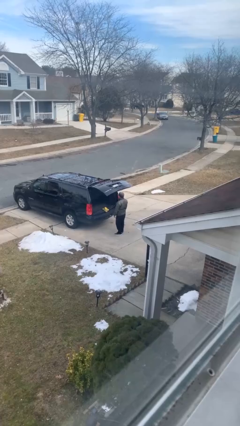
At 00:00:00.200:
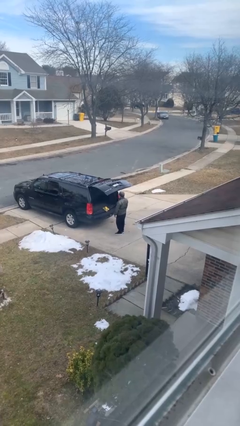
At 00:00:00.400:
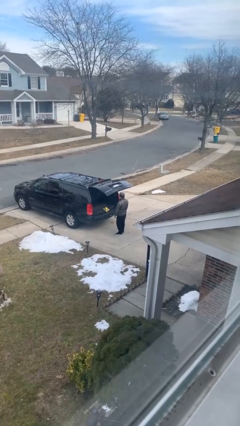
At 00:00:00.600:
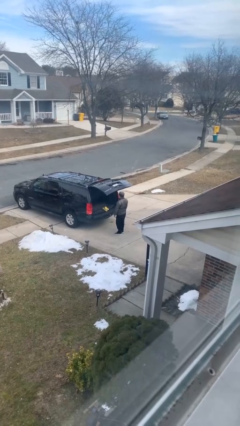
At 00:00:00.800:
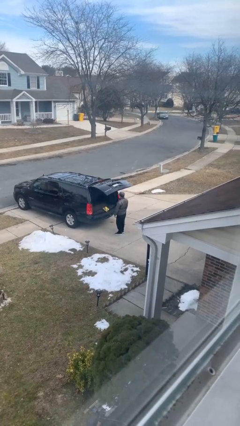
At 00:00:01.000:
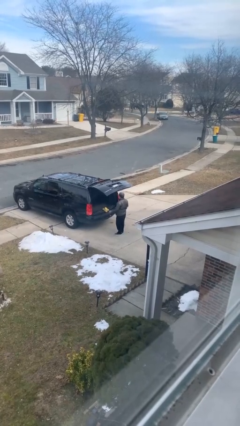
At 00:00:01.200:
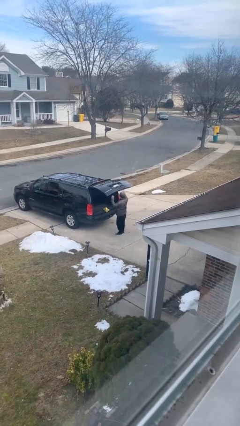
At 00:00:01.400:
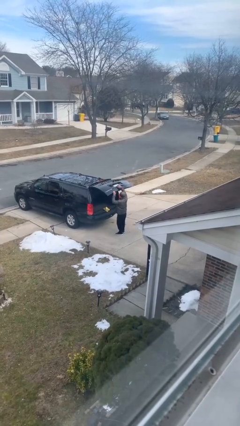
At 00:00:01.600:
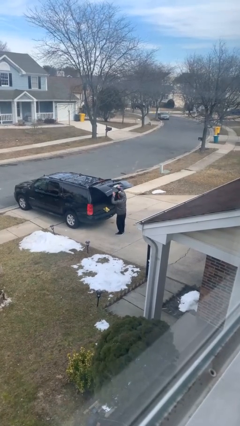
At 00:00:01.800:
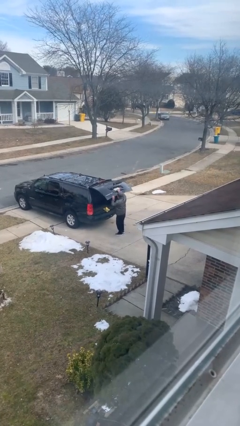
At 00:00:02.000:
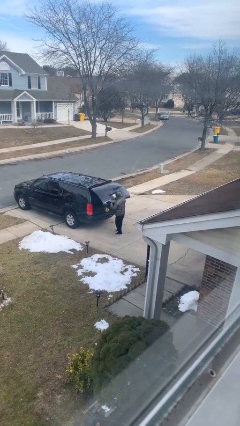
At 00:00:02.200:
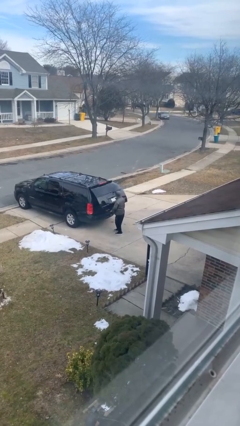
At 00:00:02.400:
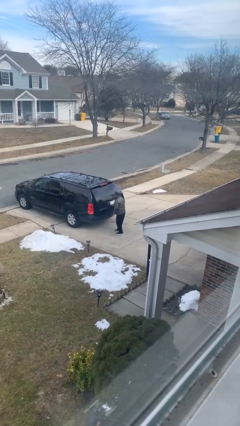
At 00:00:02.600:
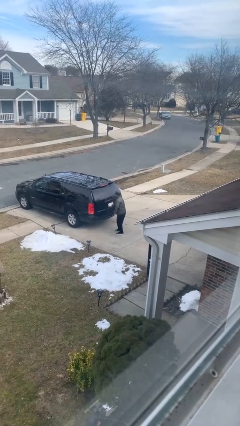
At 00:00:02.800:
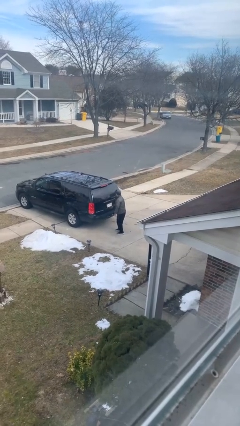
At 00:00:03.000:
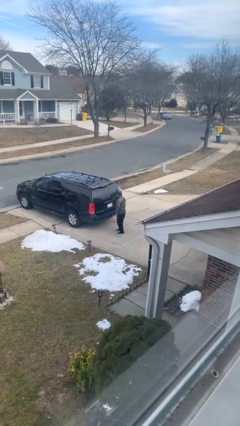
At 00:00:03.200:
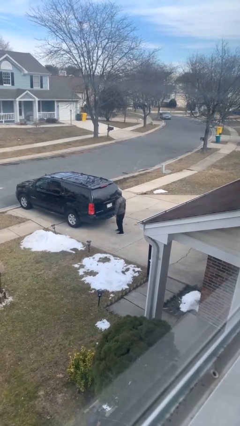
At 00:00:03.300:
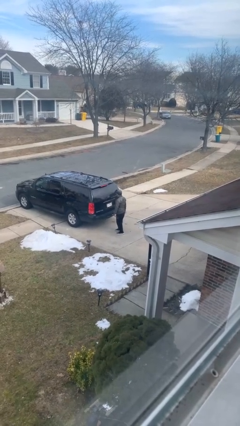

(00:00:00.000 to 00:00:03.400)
person closes car trunk

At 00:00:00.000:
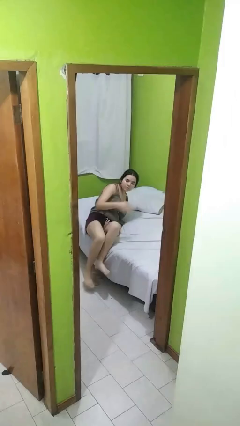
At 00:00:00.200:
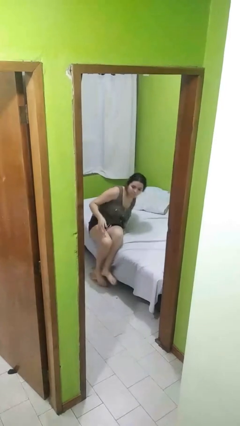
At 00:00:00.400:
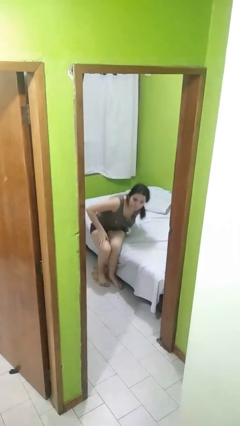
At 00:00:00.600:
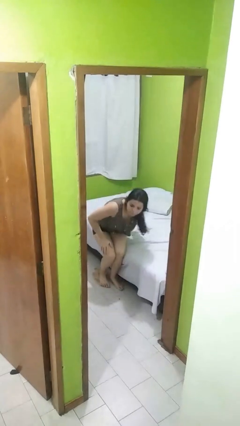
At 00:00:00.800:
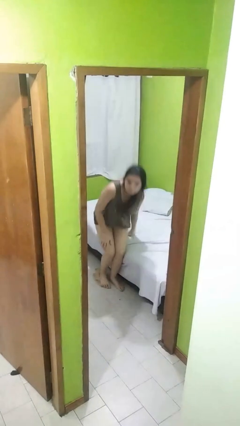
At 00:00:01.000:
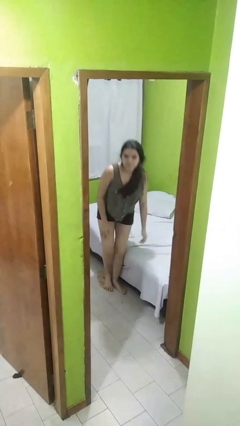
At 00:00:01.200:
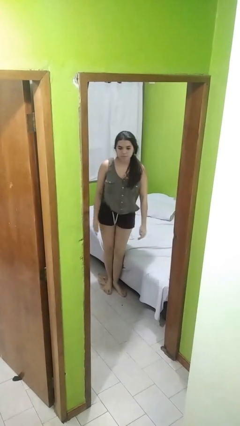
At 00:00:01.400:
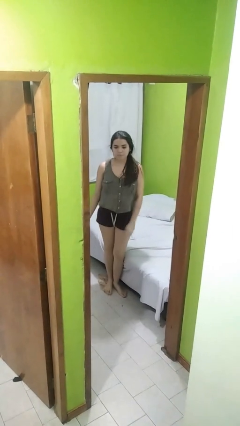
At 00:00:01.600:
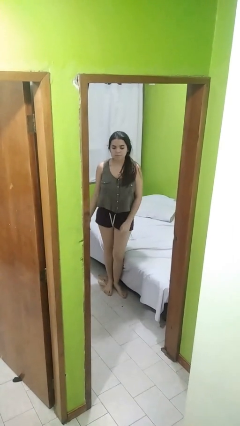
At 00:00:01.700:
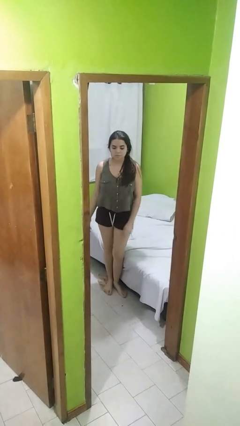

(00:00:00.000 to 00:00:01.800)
person stands up

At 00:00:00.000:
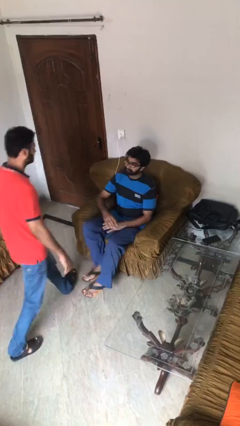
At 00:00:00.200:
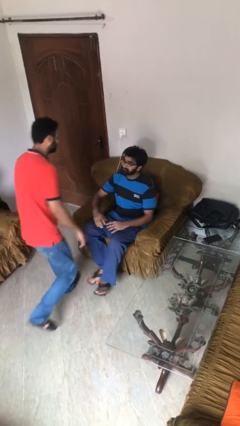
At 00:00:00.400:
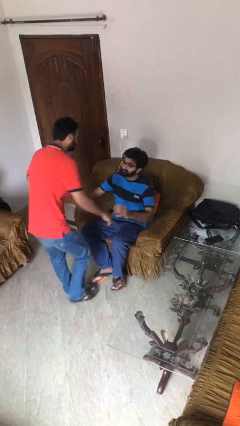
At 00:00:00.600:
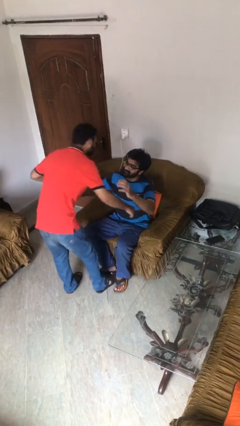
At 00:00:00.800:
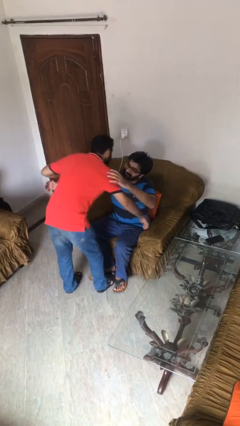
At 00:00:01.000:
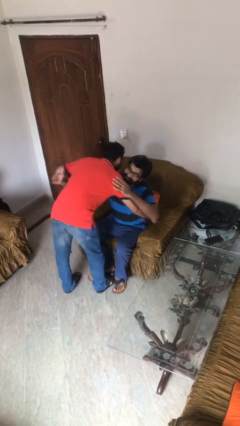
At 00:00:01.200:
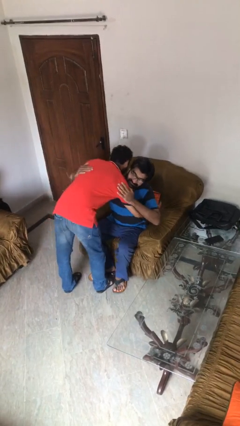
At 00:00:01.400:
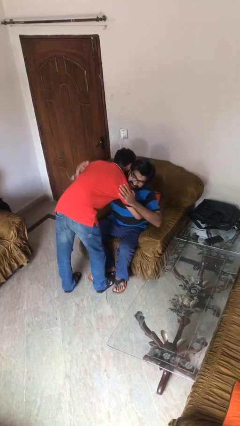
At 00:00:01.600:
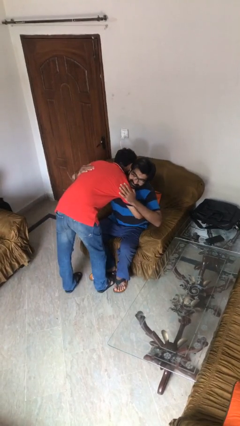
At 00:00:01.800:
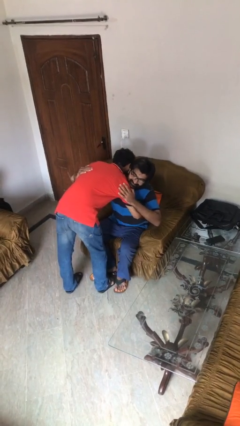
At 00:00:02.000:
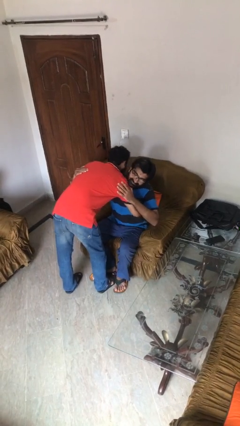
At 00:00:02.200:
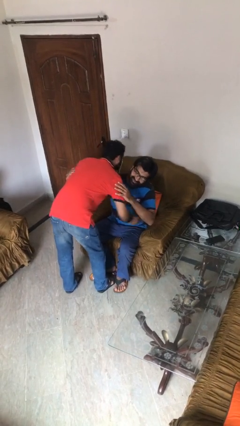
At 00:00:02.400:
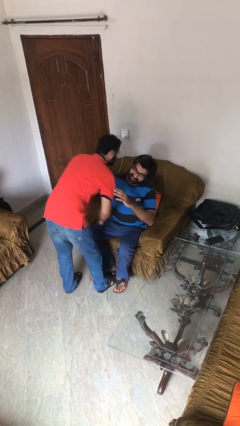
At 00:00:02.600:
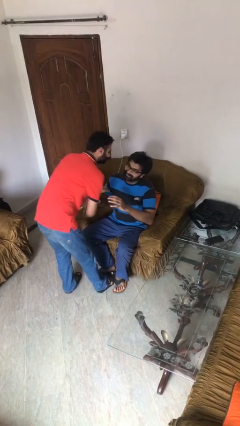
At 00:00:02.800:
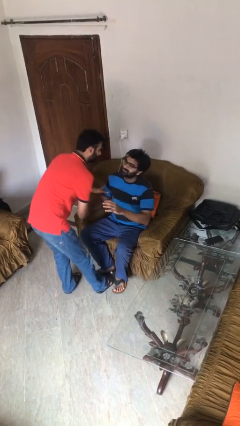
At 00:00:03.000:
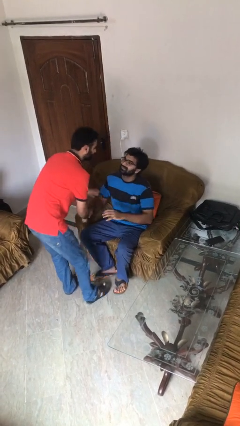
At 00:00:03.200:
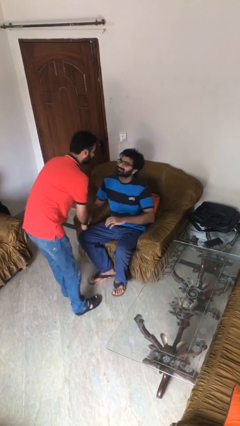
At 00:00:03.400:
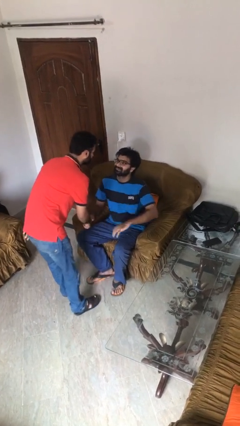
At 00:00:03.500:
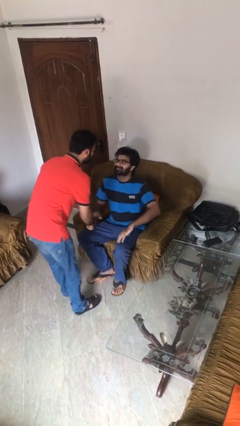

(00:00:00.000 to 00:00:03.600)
person embraces person

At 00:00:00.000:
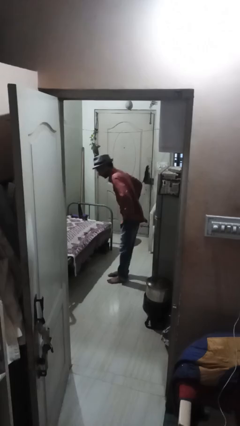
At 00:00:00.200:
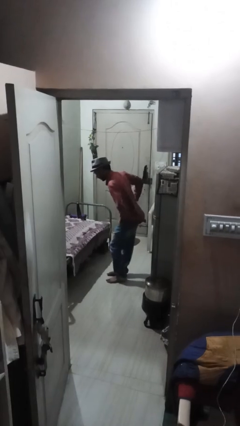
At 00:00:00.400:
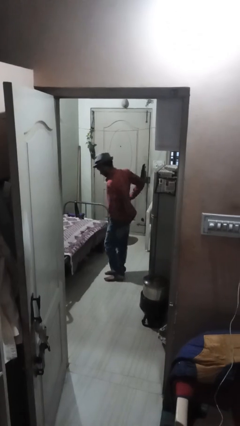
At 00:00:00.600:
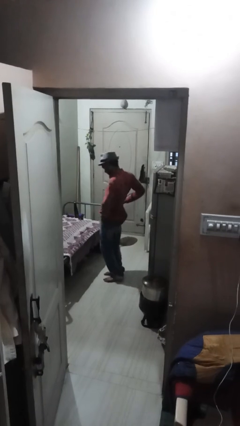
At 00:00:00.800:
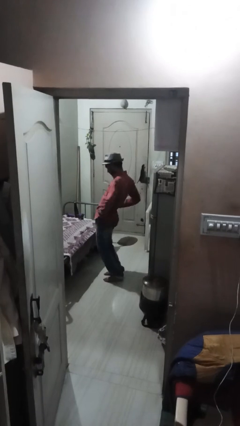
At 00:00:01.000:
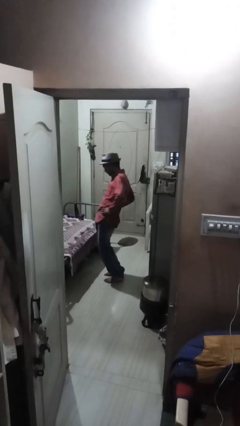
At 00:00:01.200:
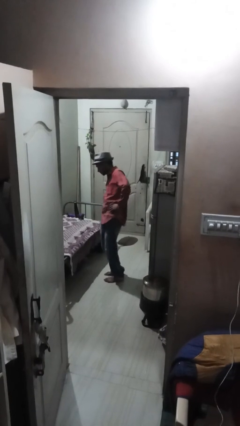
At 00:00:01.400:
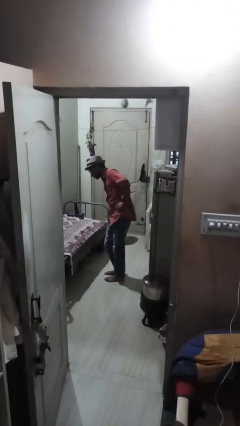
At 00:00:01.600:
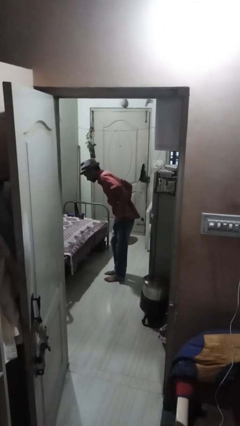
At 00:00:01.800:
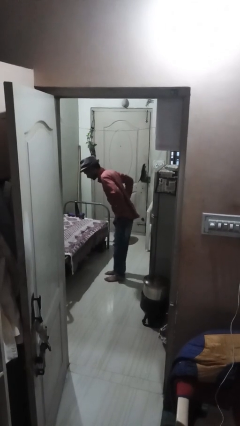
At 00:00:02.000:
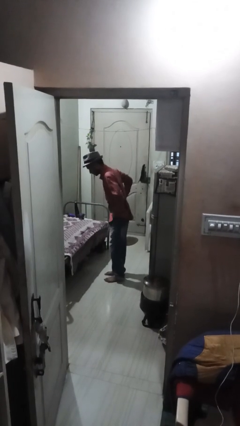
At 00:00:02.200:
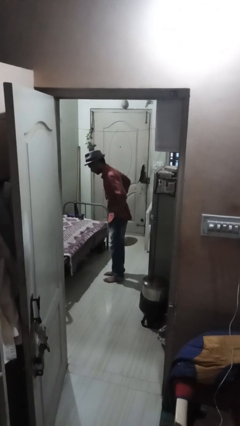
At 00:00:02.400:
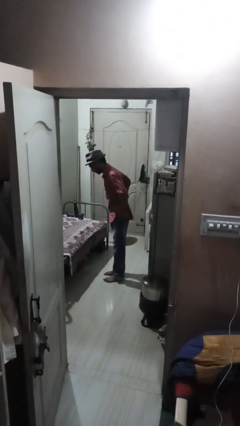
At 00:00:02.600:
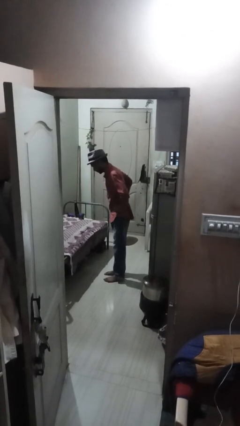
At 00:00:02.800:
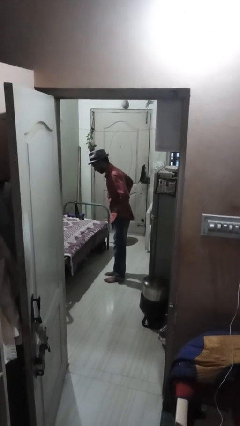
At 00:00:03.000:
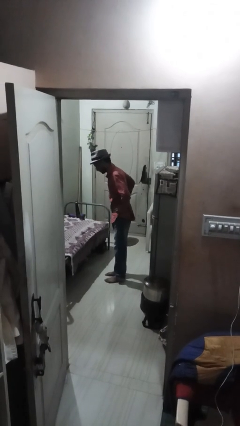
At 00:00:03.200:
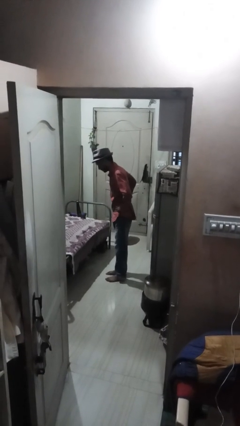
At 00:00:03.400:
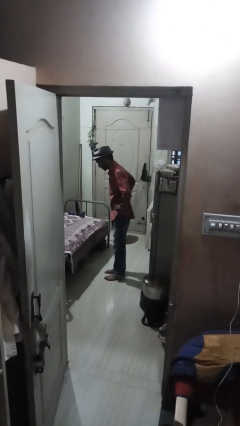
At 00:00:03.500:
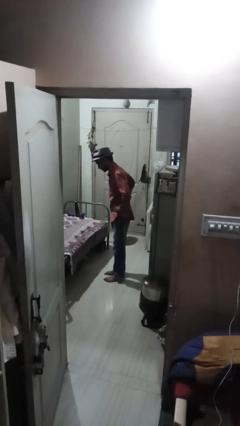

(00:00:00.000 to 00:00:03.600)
person wiggles hips

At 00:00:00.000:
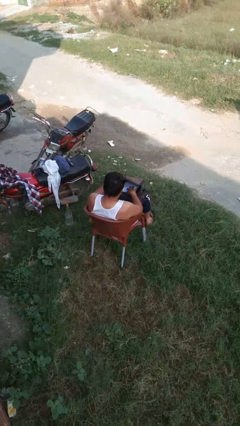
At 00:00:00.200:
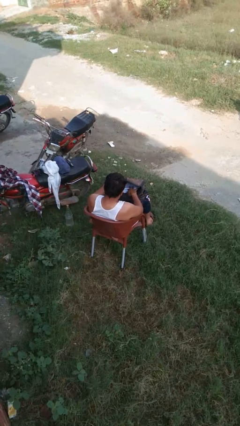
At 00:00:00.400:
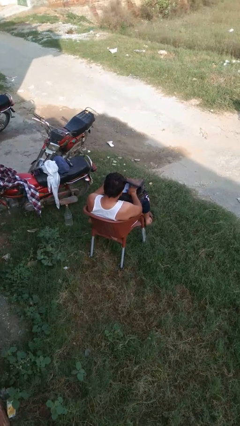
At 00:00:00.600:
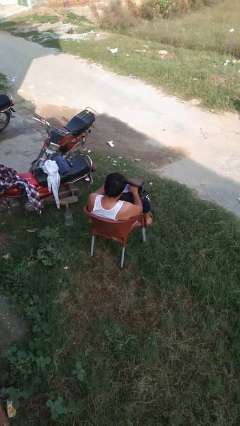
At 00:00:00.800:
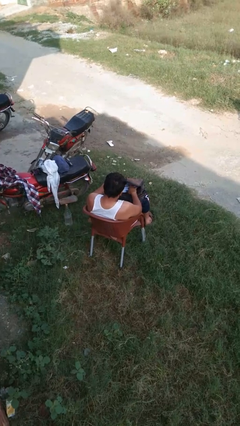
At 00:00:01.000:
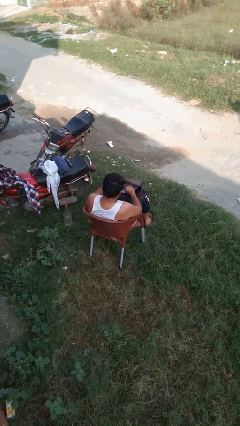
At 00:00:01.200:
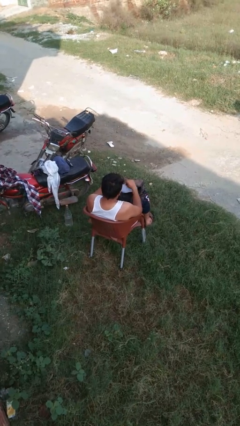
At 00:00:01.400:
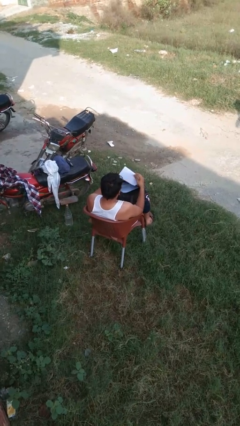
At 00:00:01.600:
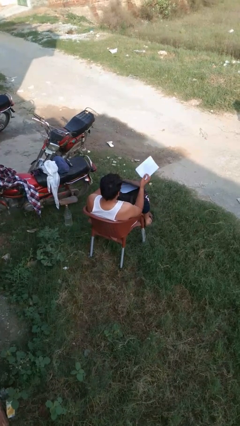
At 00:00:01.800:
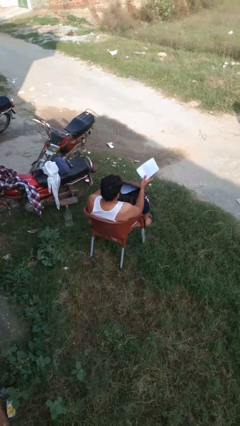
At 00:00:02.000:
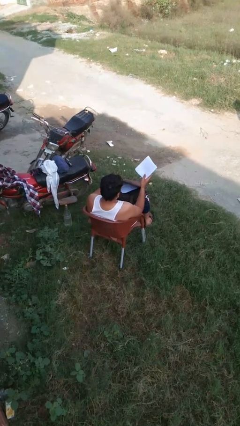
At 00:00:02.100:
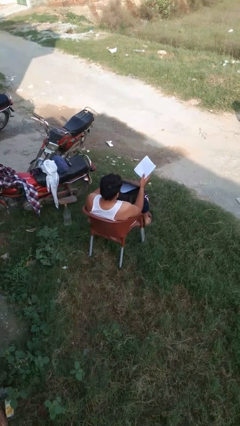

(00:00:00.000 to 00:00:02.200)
person takes object from backpack

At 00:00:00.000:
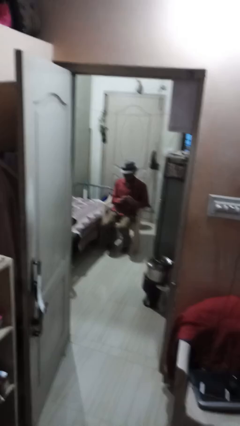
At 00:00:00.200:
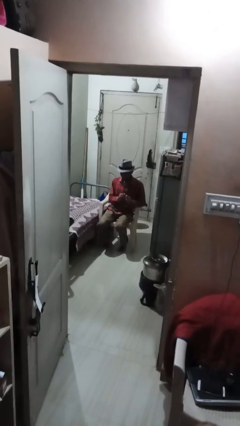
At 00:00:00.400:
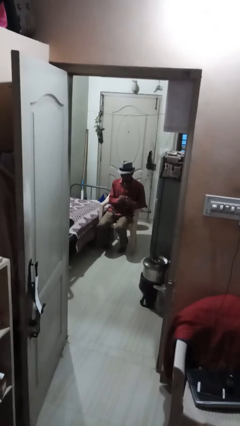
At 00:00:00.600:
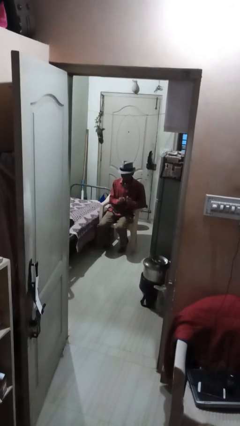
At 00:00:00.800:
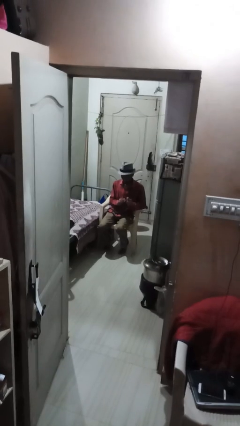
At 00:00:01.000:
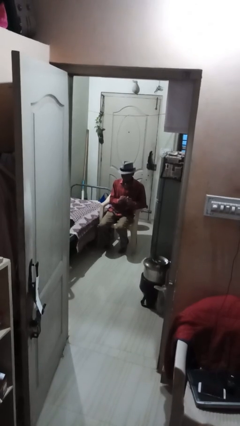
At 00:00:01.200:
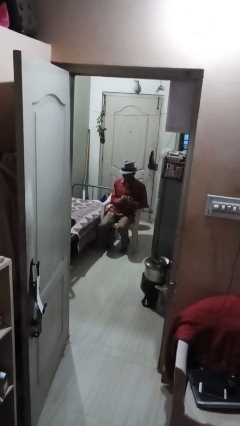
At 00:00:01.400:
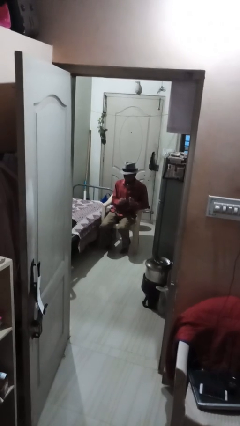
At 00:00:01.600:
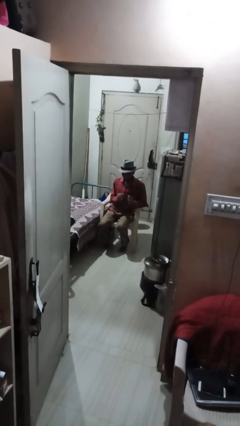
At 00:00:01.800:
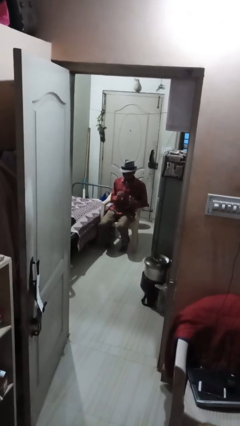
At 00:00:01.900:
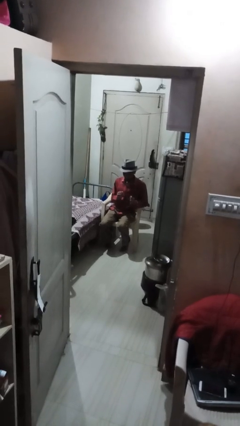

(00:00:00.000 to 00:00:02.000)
person files fingernails

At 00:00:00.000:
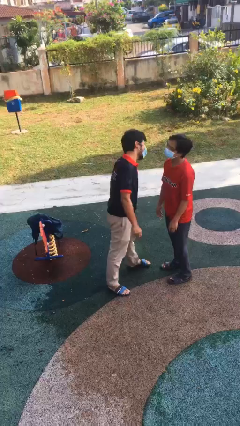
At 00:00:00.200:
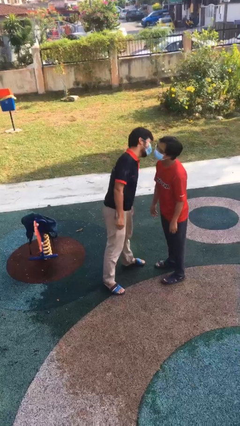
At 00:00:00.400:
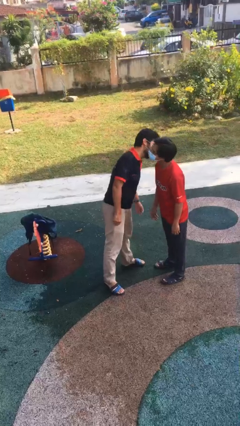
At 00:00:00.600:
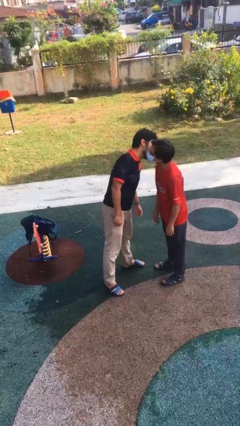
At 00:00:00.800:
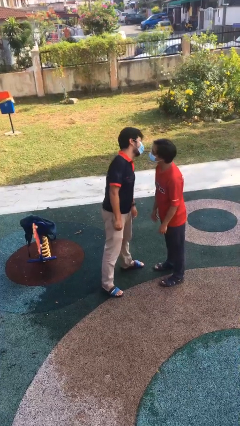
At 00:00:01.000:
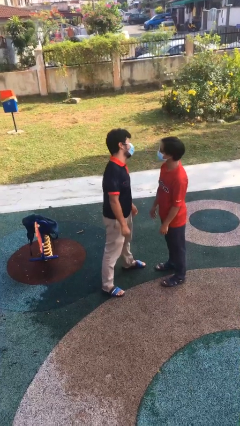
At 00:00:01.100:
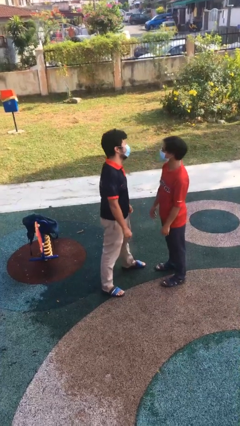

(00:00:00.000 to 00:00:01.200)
person kisses cheek of person
